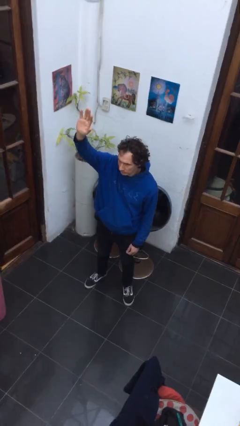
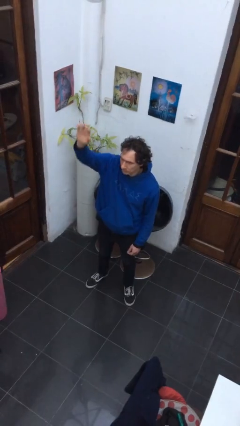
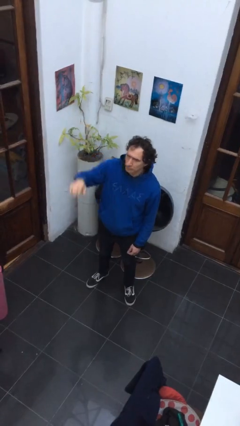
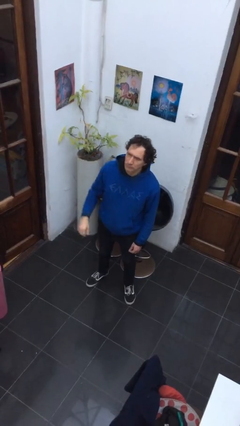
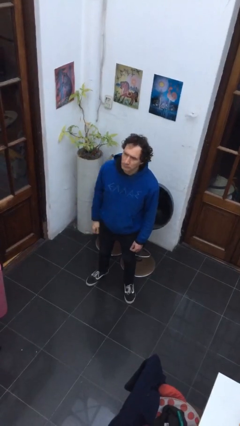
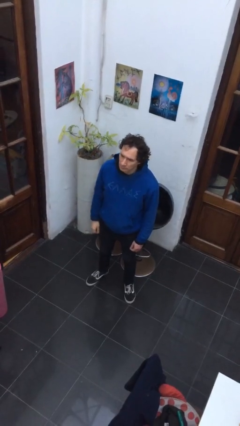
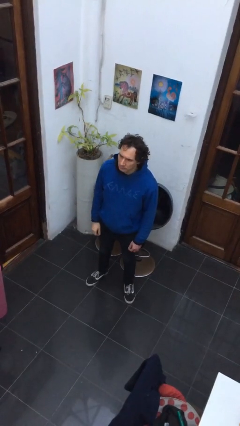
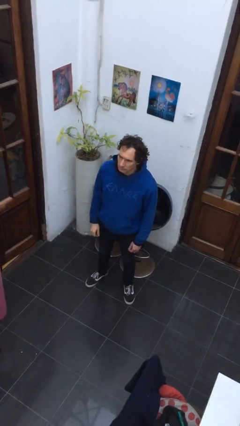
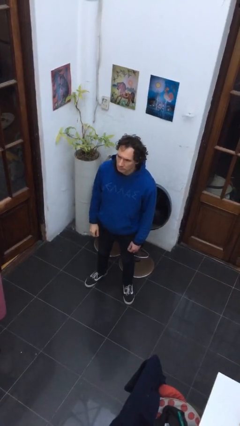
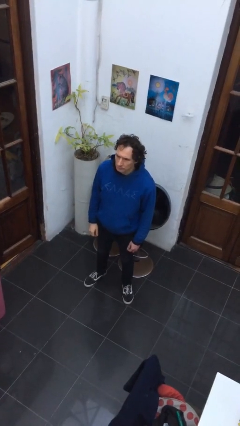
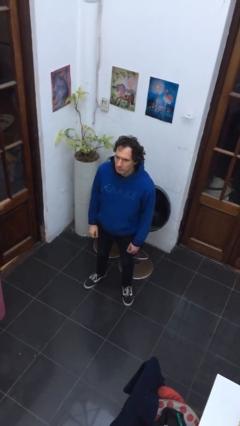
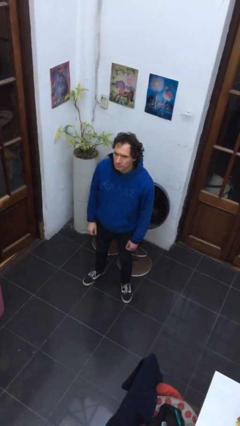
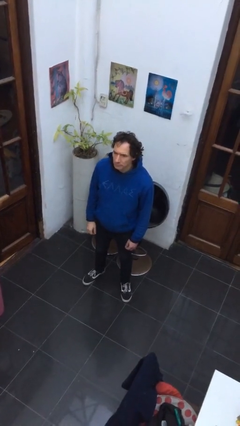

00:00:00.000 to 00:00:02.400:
person gestures lower hand

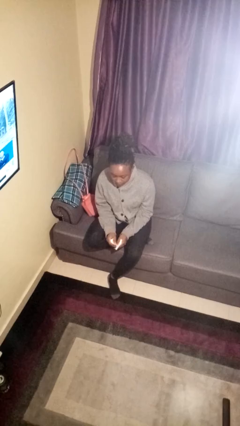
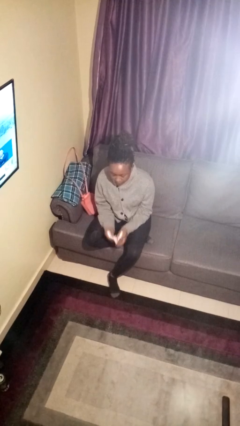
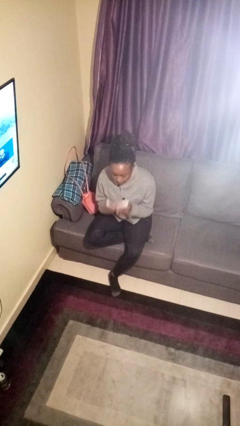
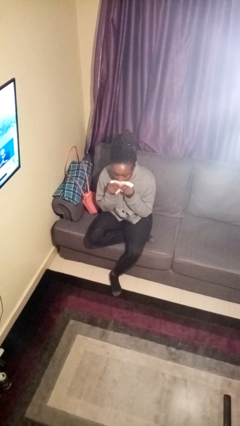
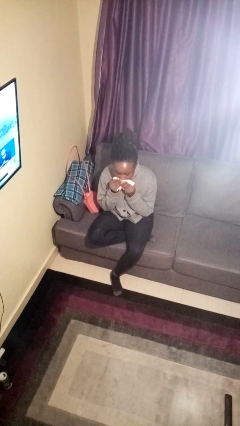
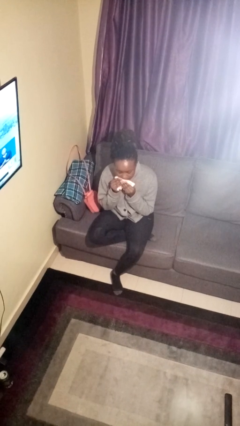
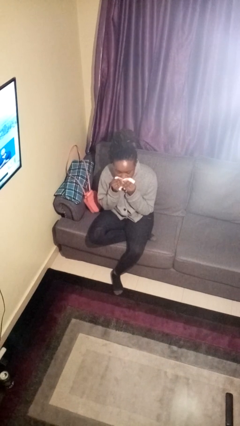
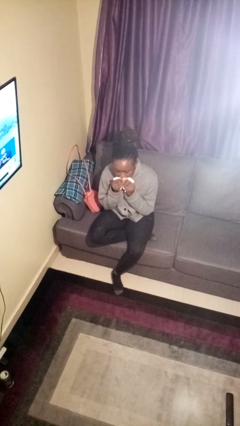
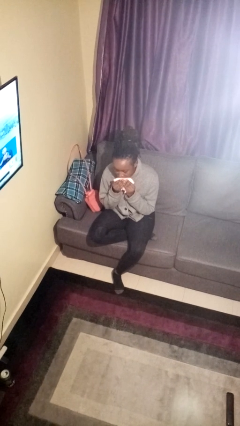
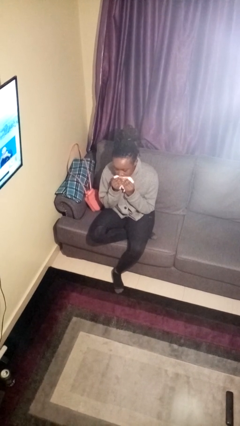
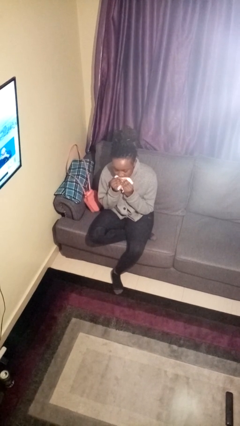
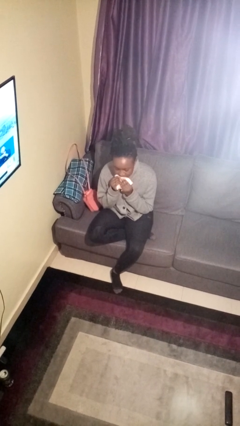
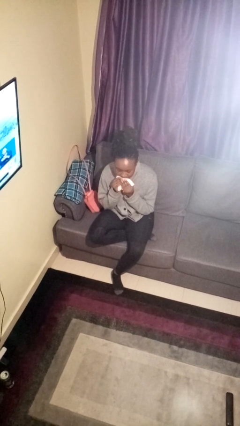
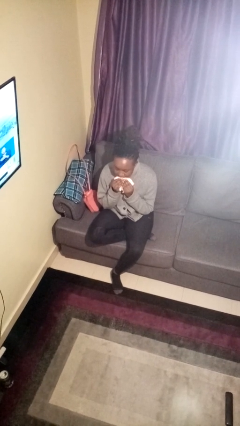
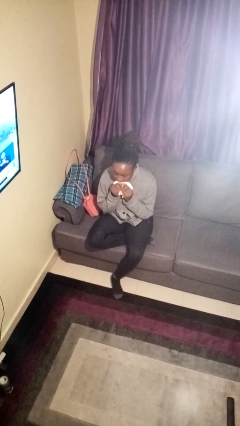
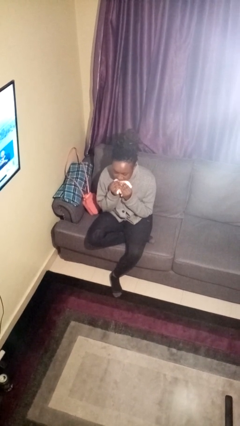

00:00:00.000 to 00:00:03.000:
person wipes mouth with napkin

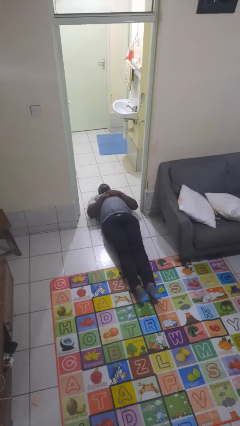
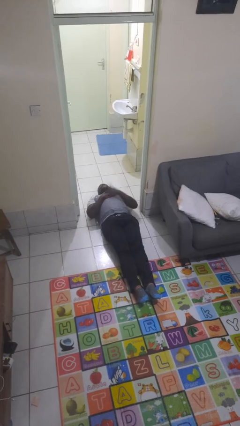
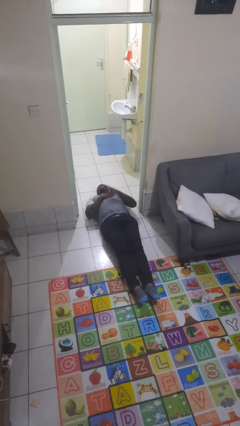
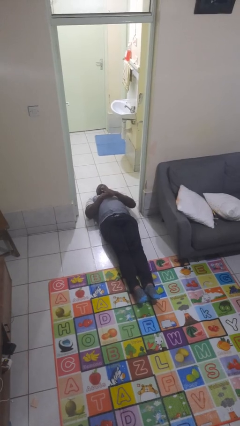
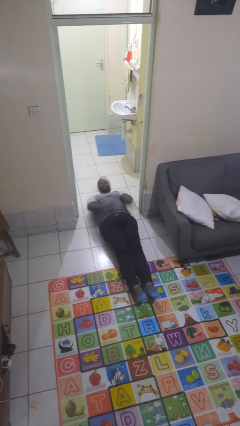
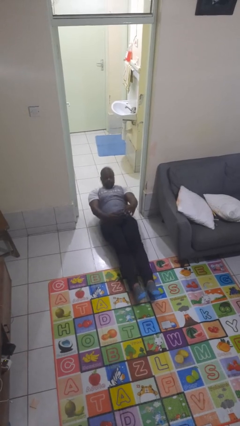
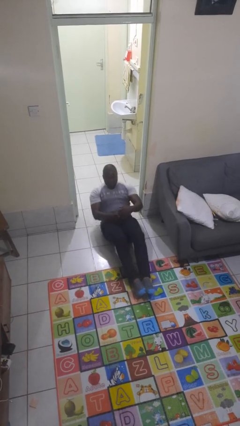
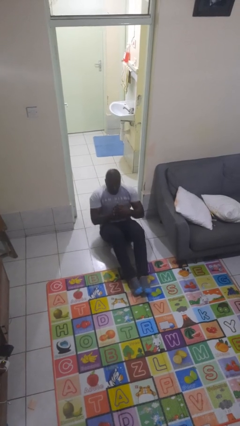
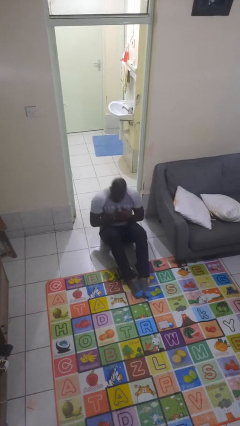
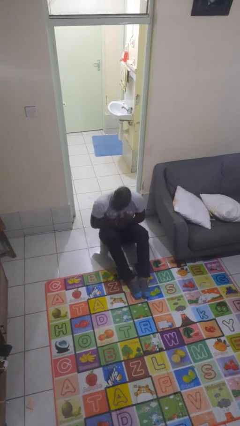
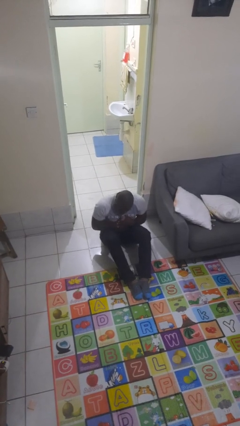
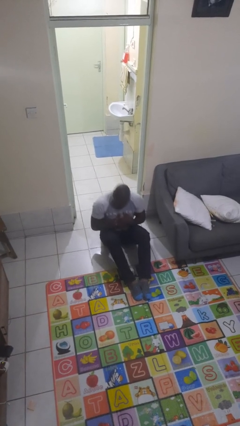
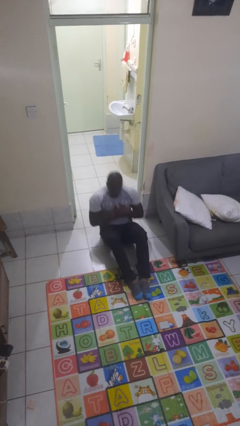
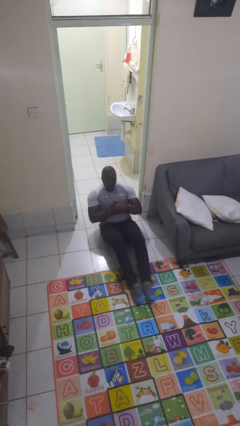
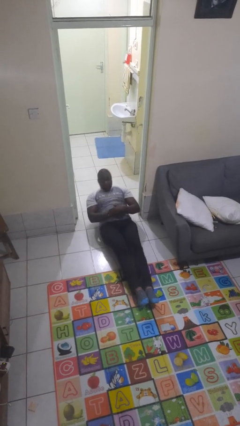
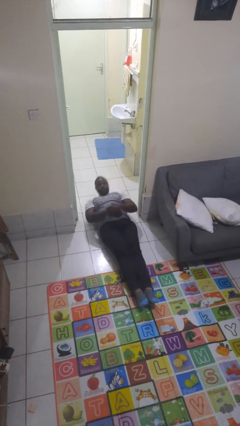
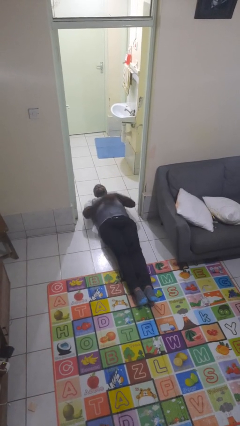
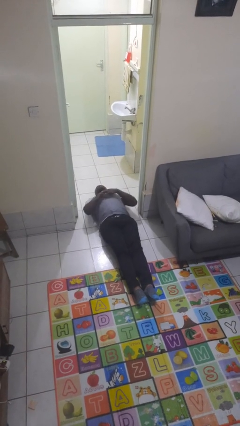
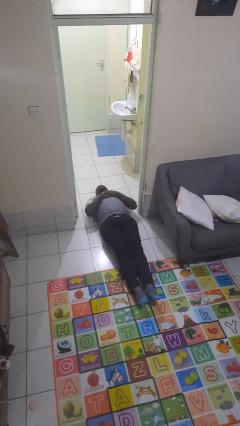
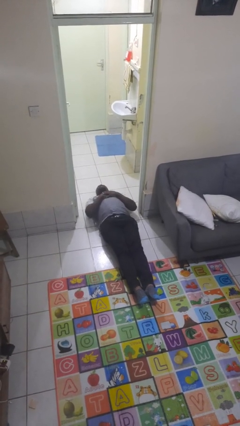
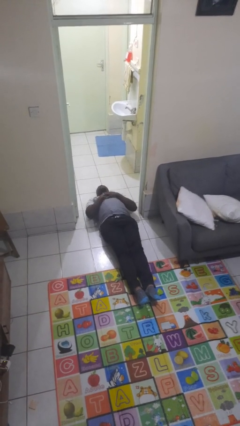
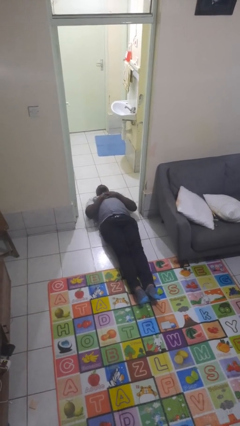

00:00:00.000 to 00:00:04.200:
person exercises with situp

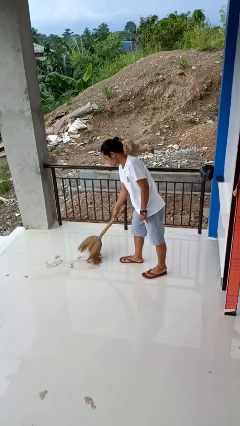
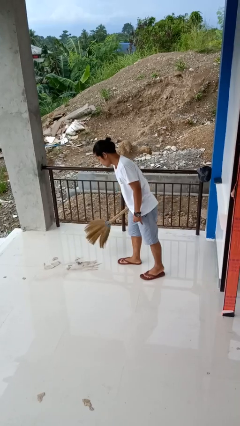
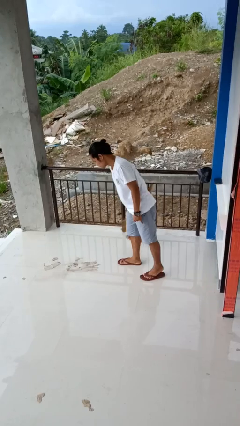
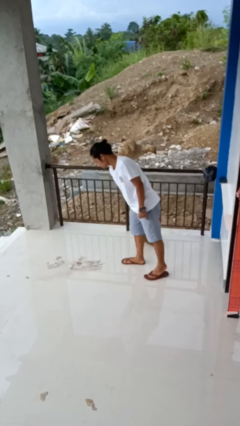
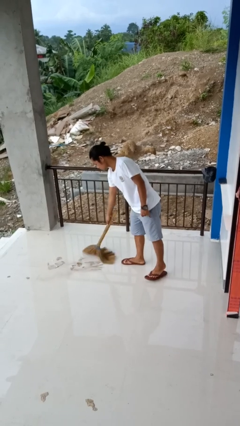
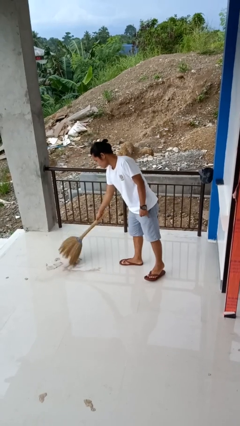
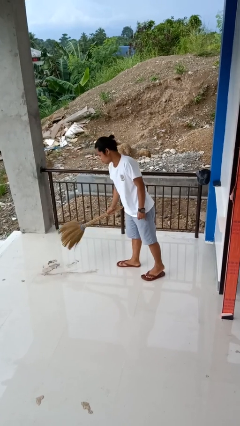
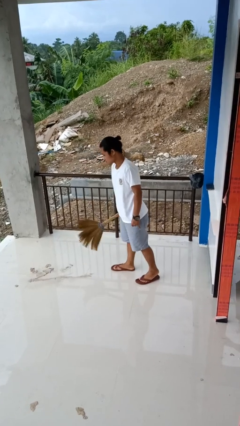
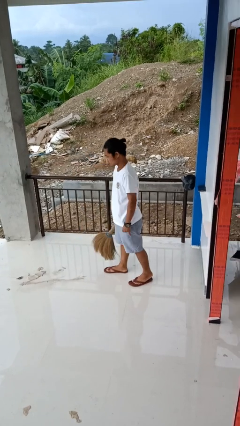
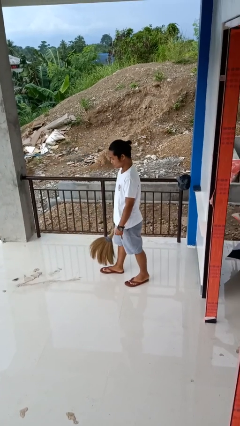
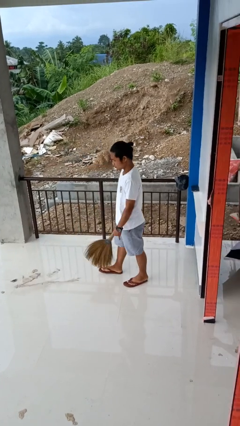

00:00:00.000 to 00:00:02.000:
person sweeps floor

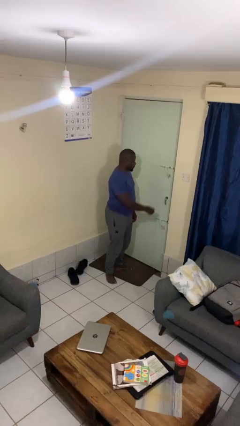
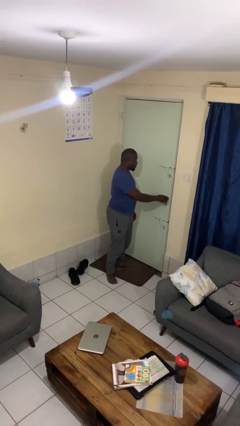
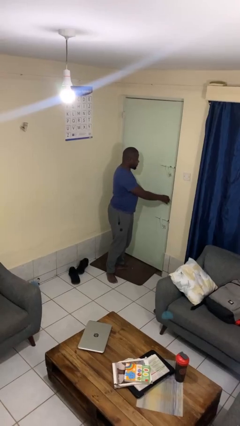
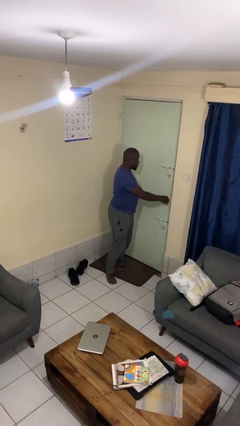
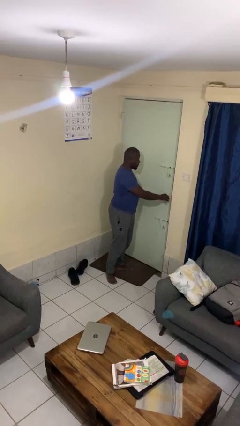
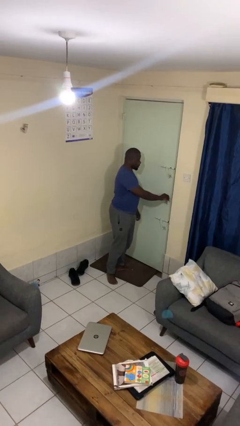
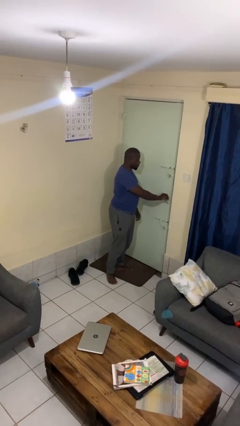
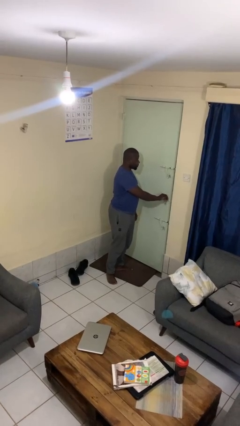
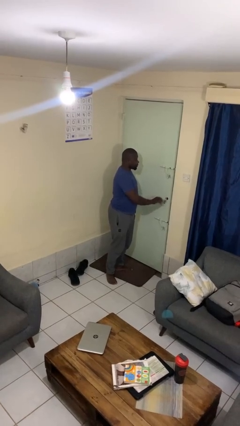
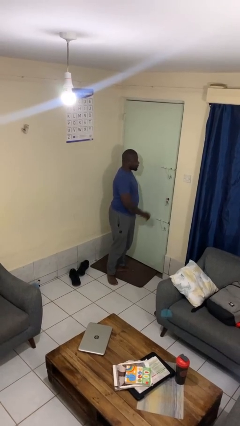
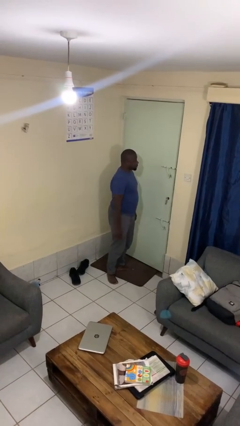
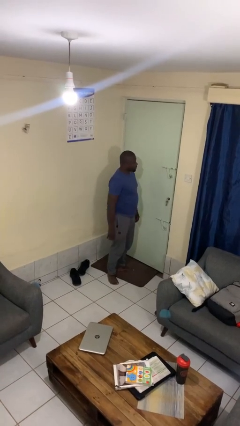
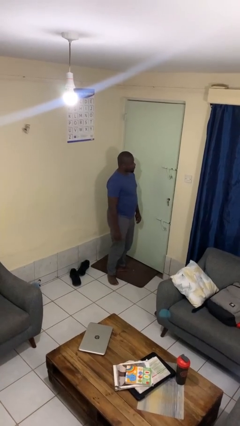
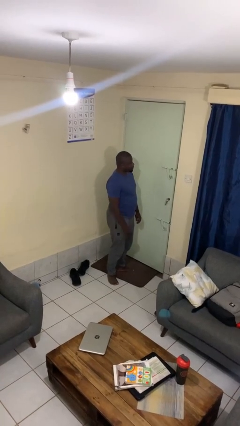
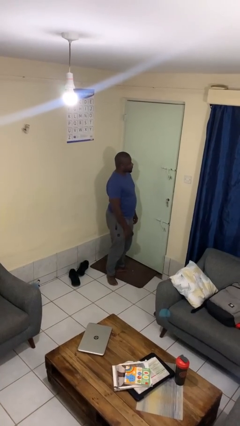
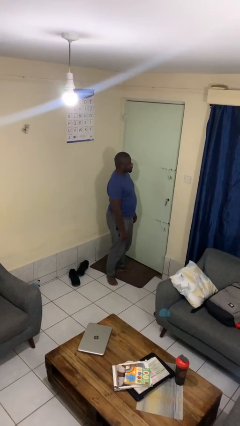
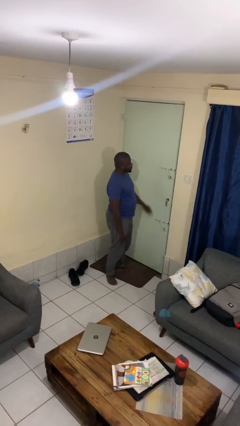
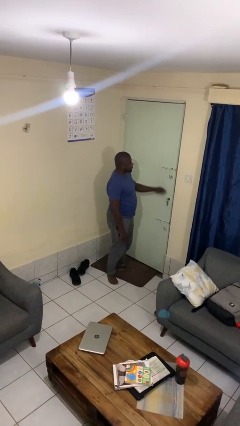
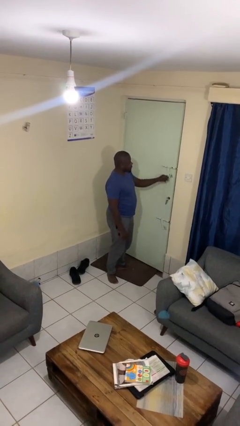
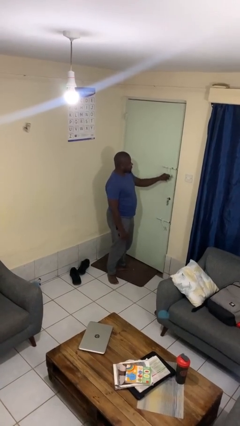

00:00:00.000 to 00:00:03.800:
person unlocks door with keys

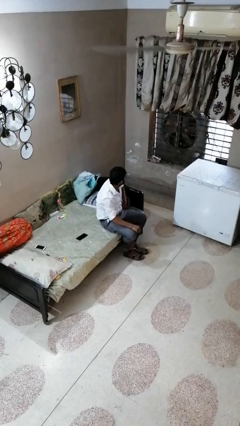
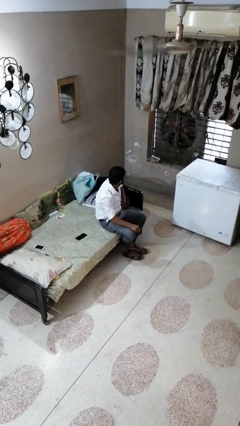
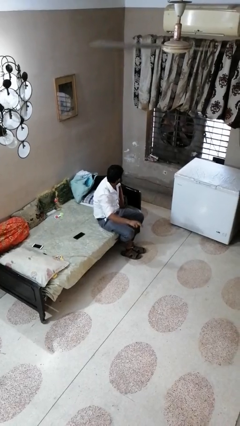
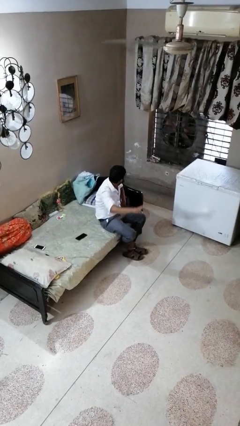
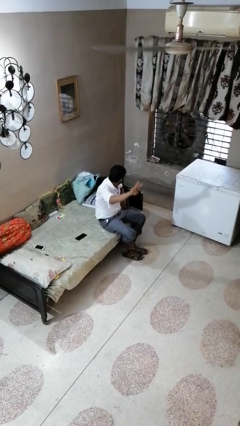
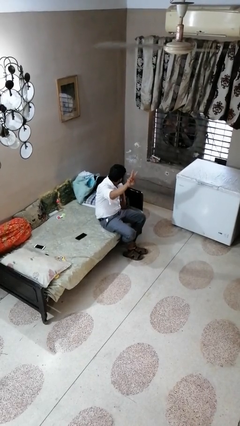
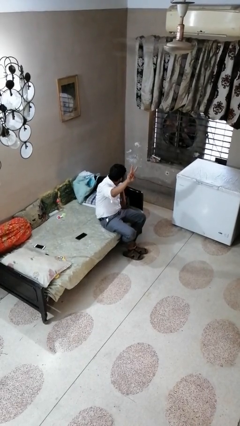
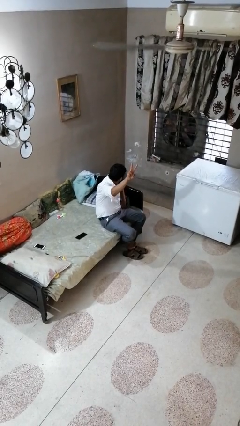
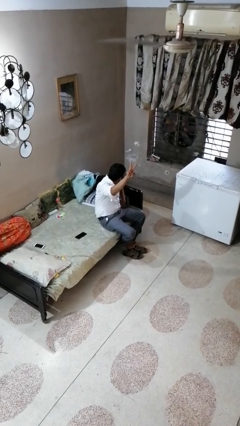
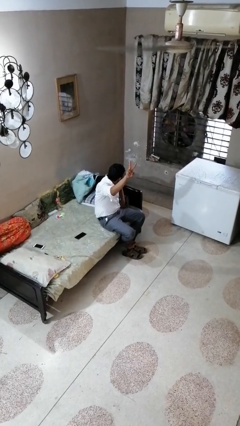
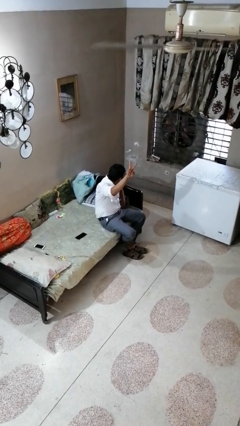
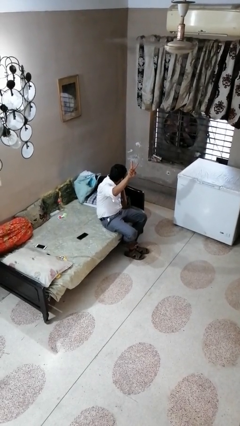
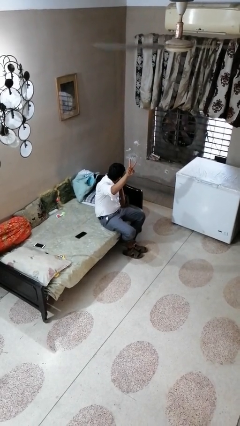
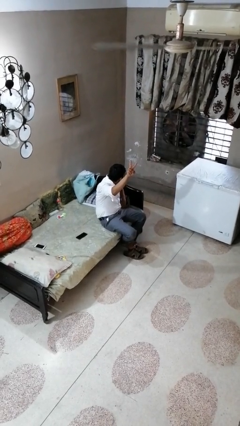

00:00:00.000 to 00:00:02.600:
person gestures peace
